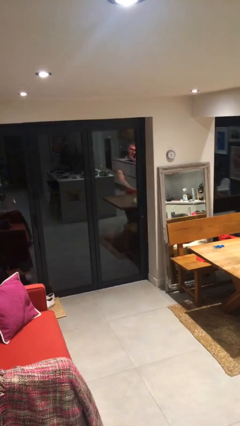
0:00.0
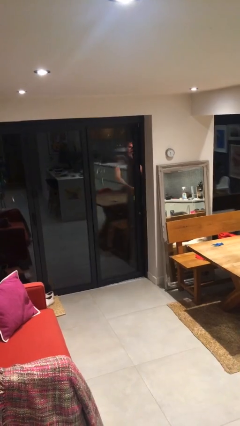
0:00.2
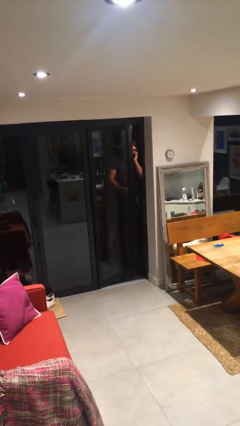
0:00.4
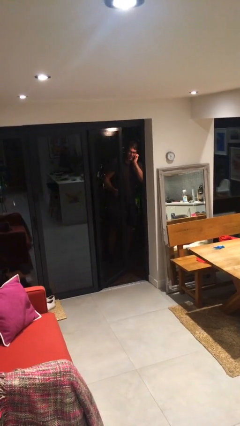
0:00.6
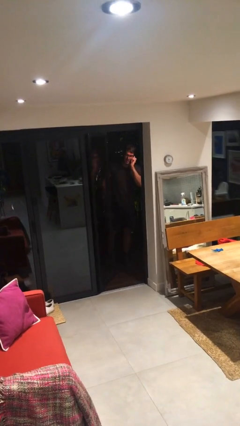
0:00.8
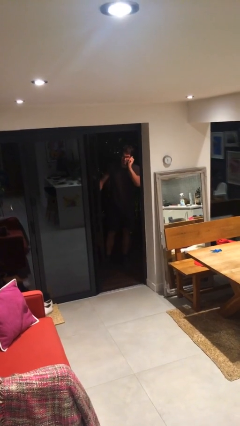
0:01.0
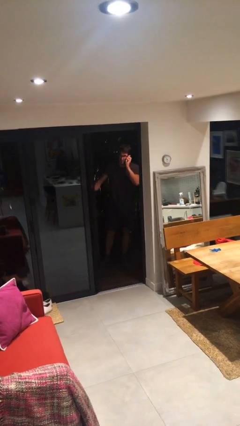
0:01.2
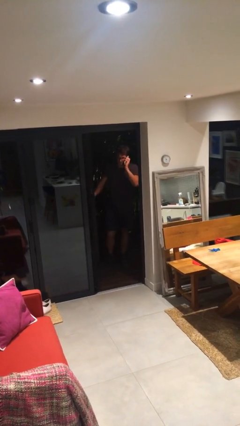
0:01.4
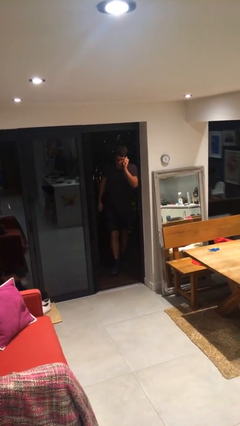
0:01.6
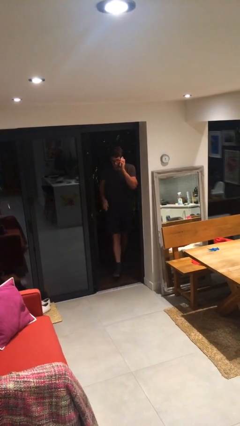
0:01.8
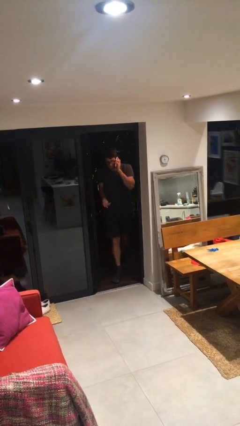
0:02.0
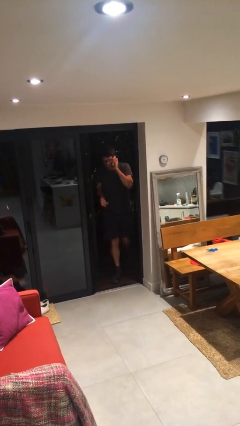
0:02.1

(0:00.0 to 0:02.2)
person opens facility door

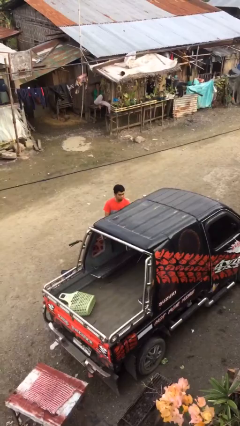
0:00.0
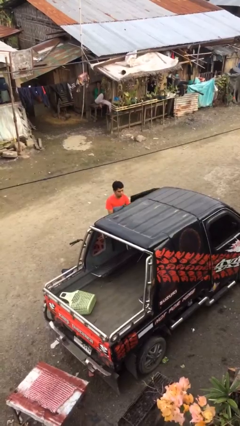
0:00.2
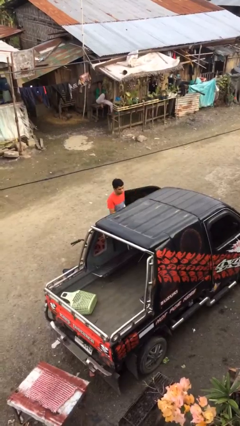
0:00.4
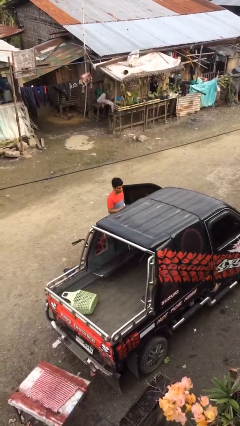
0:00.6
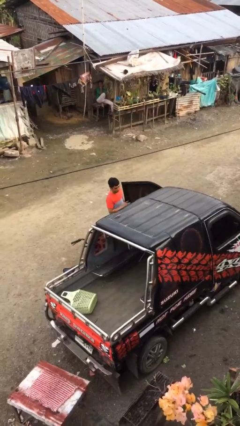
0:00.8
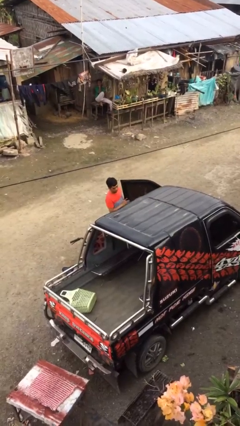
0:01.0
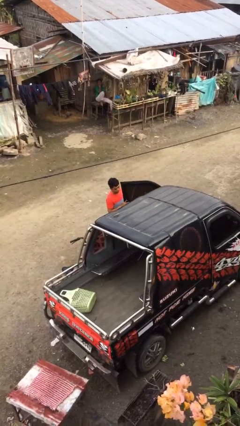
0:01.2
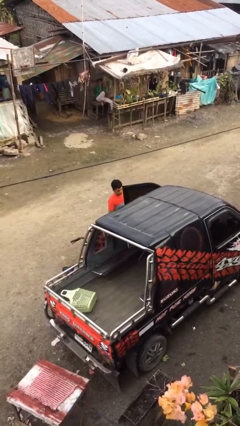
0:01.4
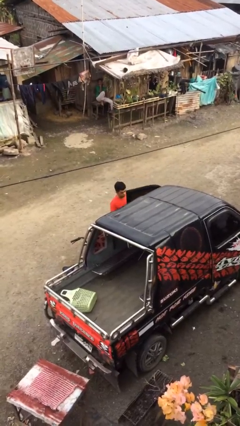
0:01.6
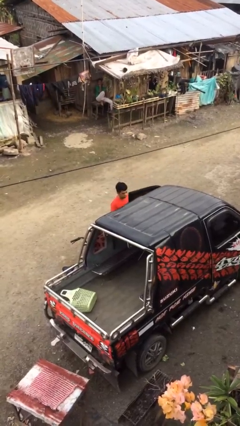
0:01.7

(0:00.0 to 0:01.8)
person opens car door

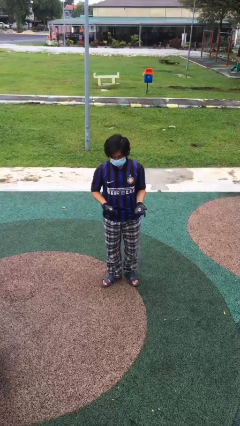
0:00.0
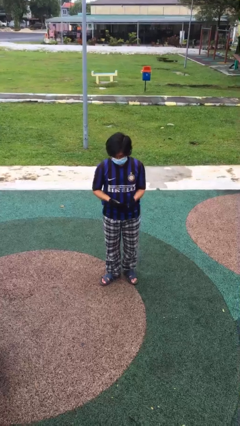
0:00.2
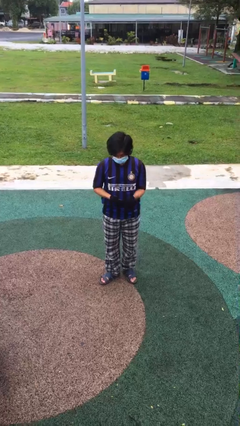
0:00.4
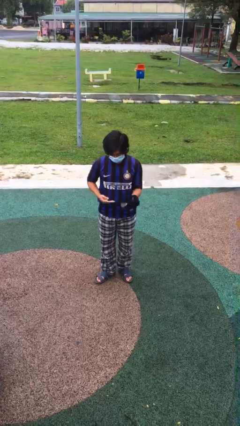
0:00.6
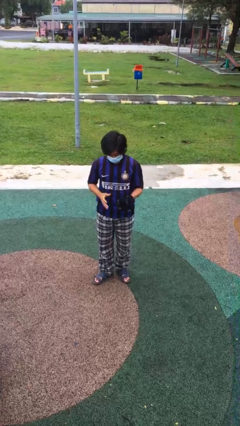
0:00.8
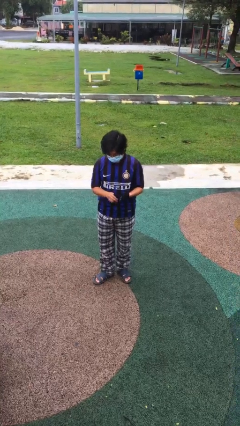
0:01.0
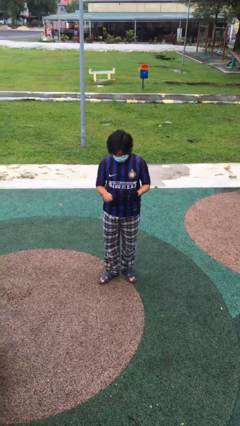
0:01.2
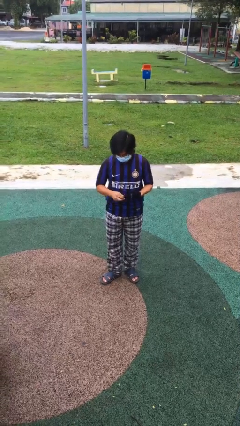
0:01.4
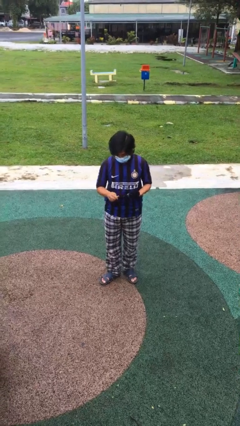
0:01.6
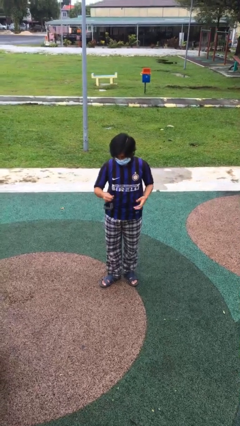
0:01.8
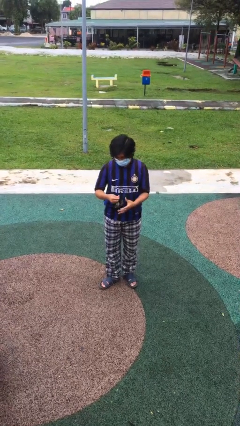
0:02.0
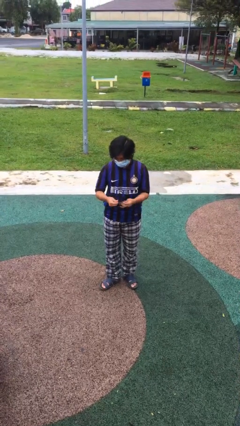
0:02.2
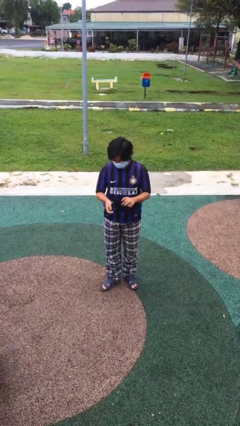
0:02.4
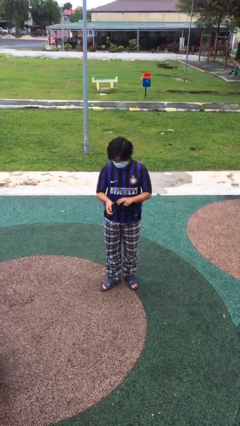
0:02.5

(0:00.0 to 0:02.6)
person takes off gloves

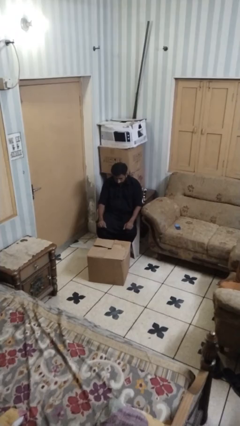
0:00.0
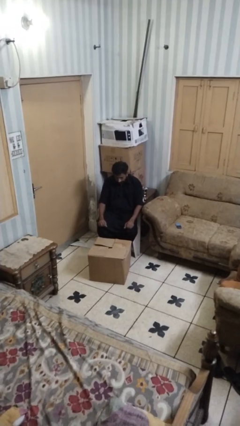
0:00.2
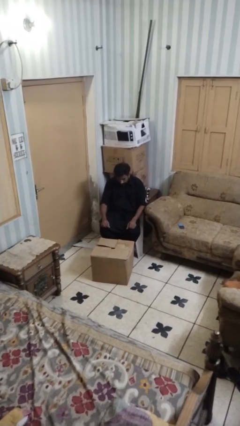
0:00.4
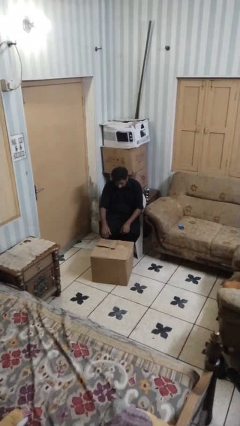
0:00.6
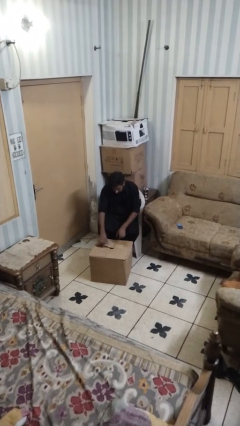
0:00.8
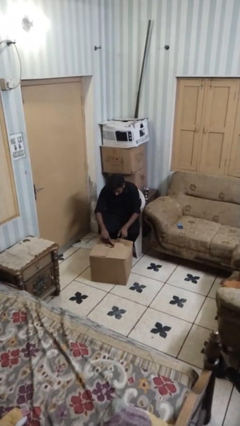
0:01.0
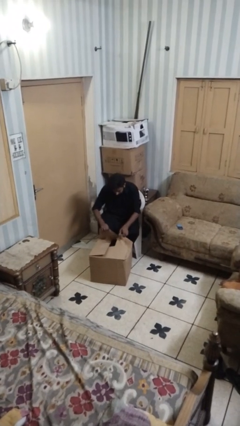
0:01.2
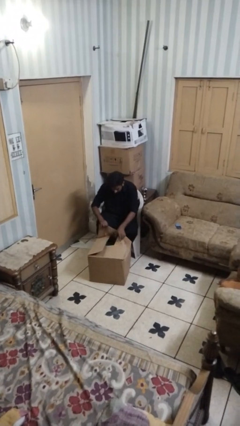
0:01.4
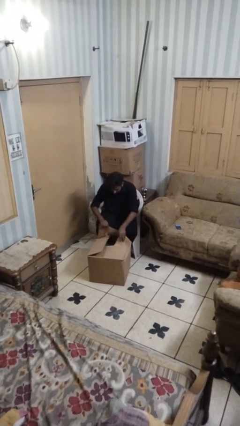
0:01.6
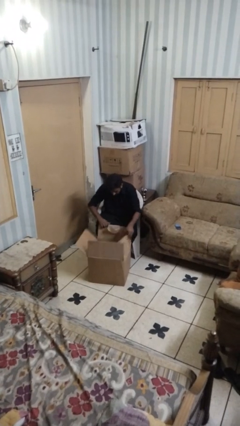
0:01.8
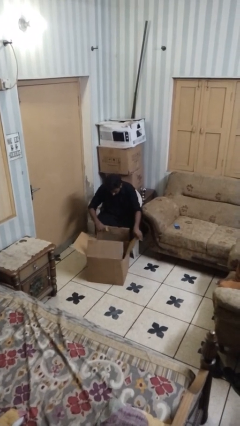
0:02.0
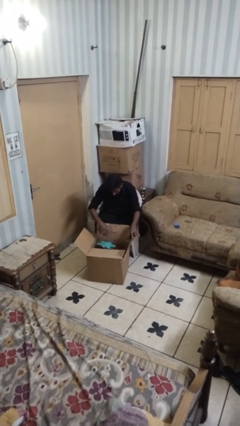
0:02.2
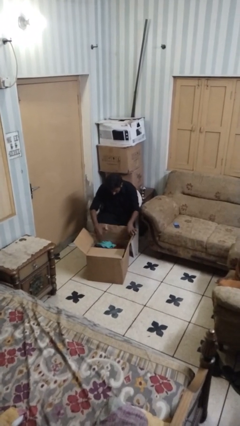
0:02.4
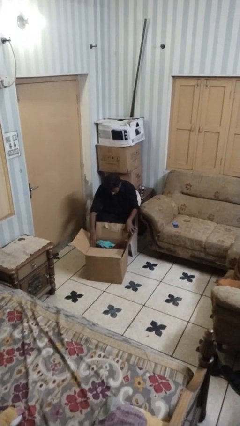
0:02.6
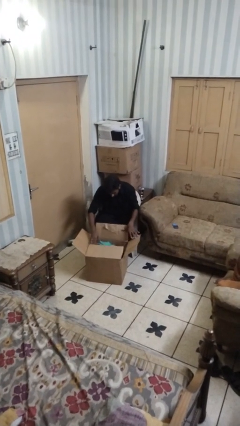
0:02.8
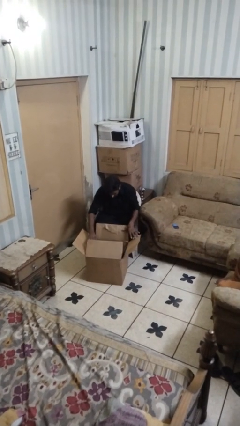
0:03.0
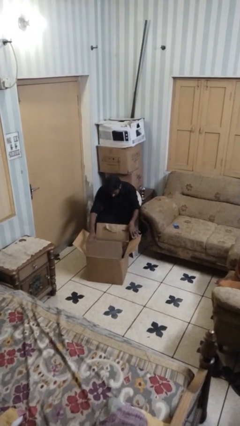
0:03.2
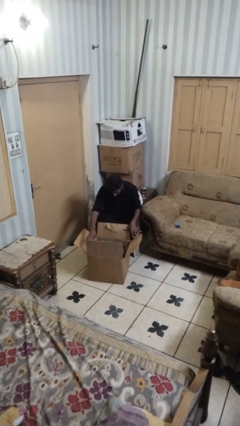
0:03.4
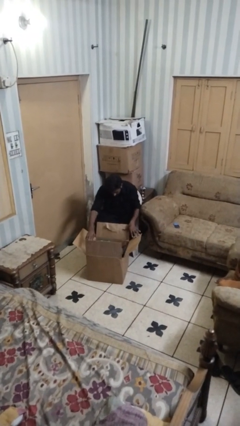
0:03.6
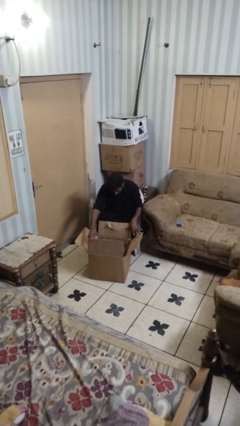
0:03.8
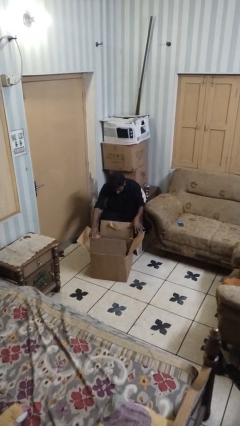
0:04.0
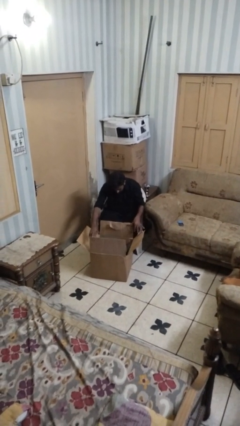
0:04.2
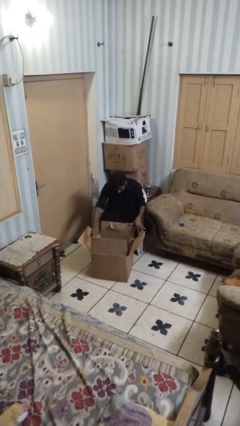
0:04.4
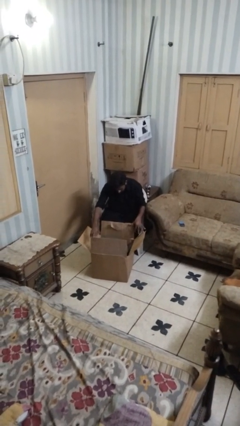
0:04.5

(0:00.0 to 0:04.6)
person opens box

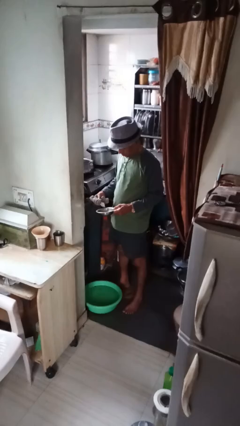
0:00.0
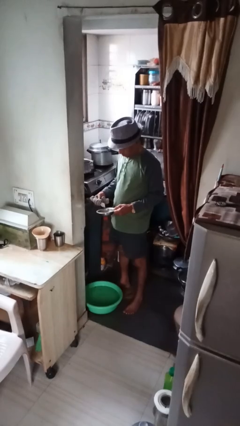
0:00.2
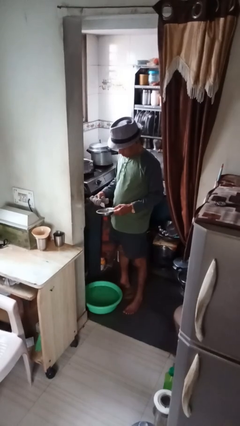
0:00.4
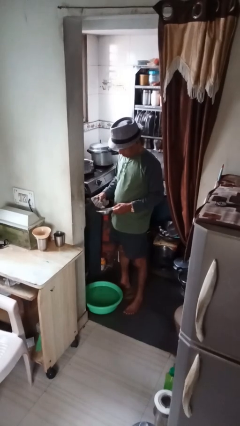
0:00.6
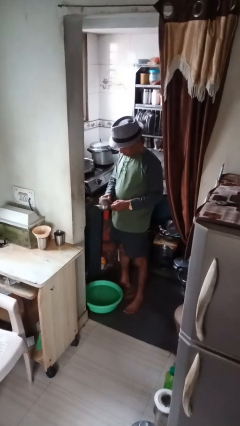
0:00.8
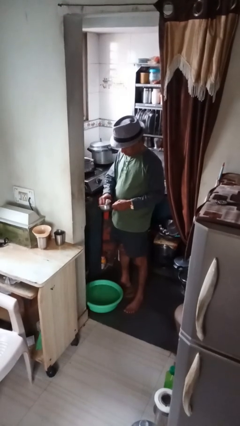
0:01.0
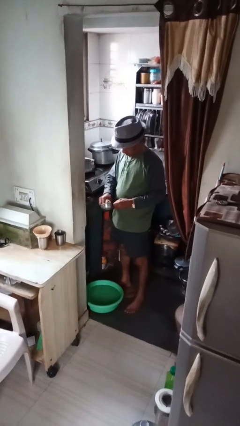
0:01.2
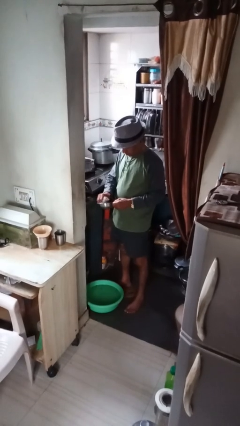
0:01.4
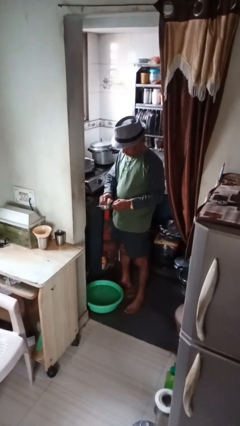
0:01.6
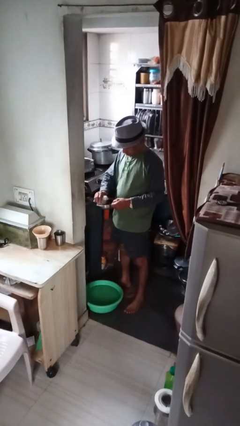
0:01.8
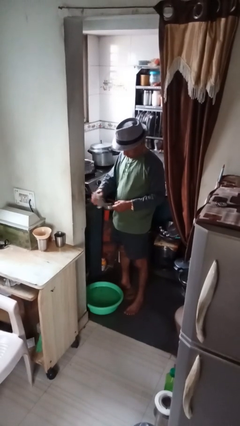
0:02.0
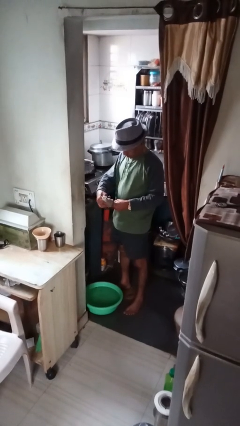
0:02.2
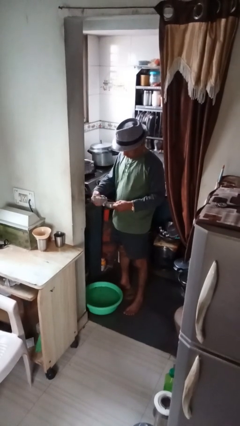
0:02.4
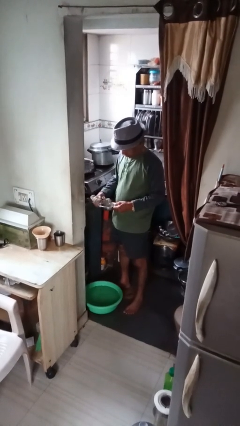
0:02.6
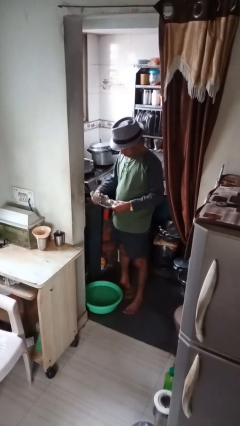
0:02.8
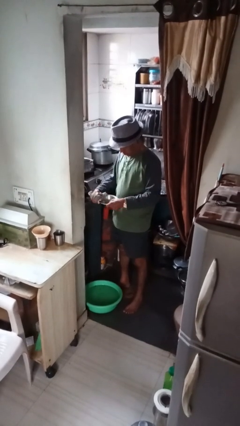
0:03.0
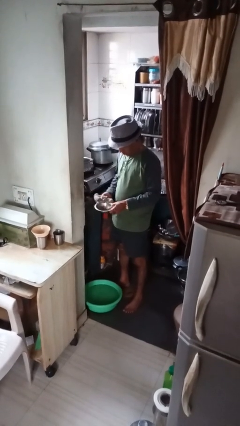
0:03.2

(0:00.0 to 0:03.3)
person dries dish

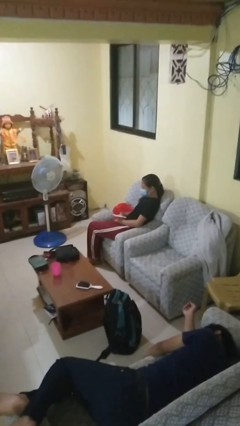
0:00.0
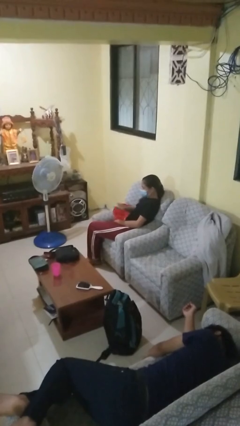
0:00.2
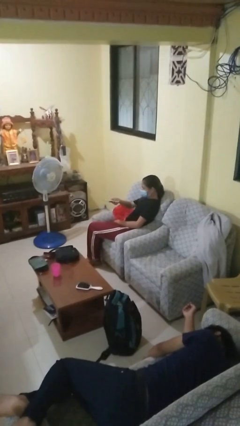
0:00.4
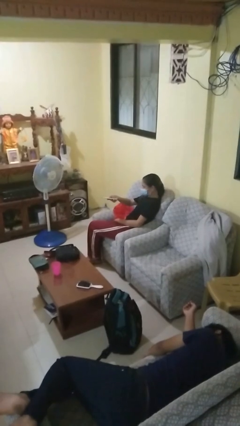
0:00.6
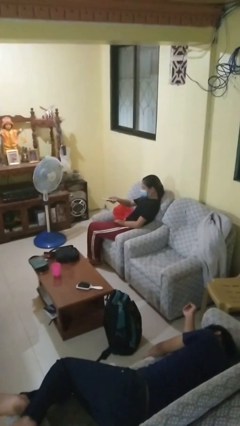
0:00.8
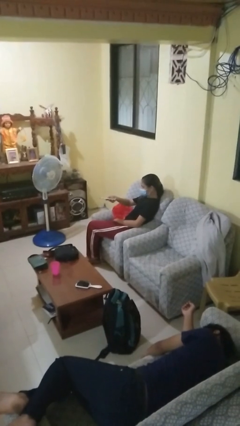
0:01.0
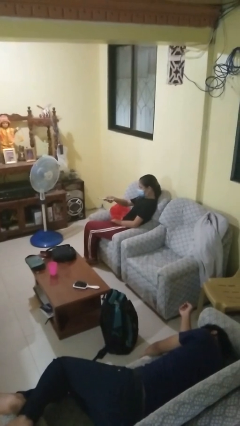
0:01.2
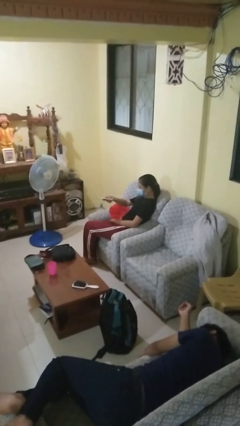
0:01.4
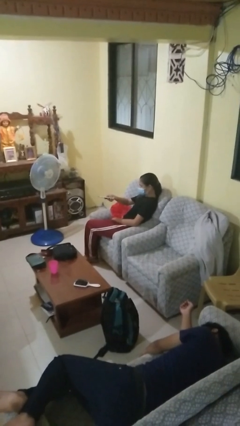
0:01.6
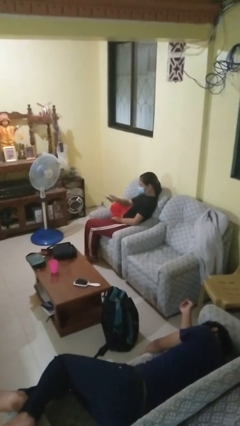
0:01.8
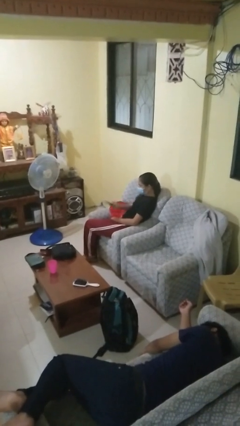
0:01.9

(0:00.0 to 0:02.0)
person uses television remote

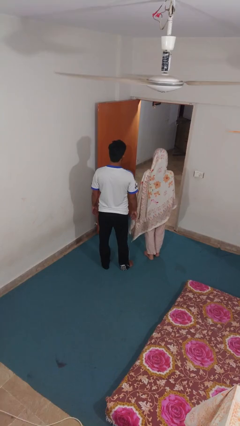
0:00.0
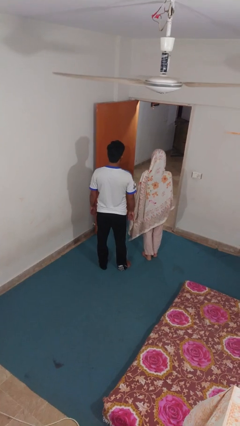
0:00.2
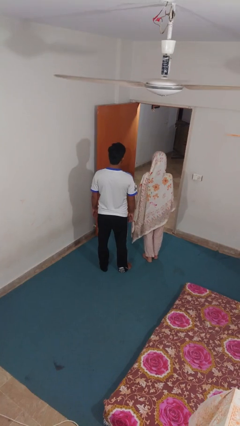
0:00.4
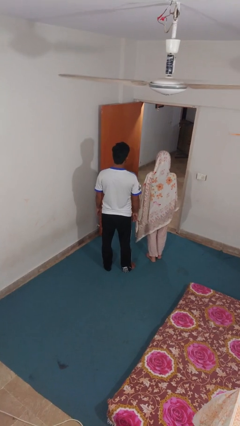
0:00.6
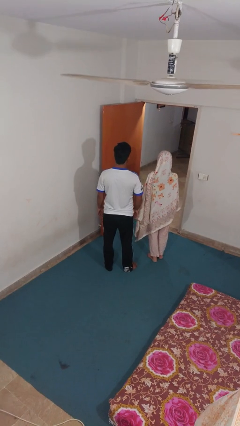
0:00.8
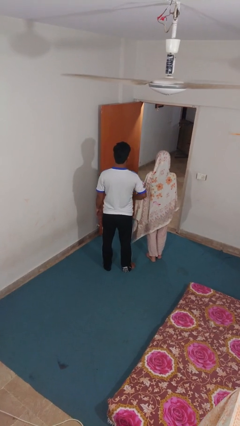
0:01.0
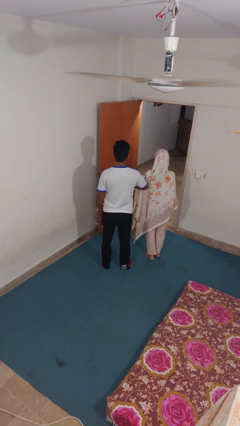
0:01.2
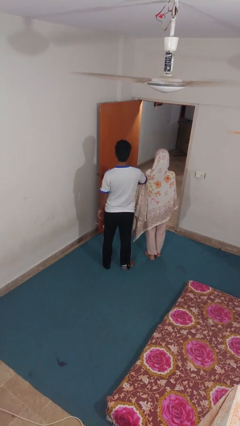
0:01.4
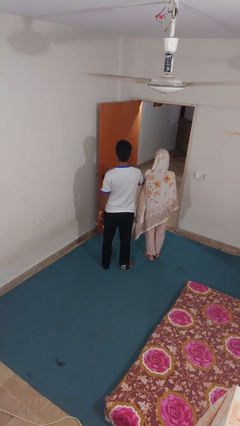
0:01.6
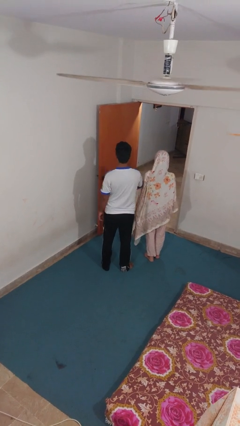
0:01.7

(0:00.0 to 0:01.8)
person nudges person with elbow
